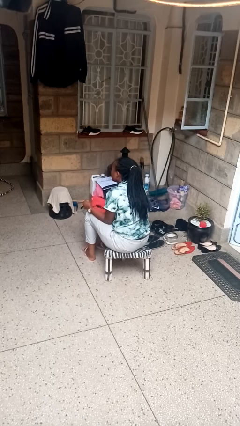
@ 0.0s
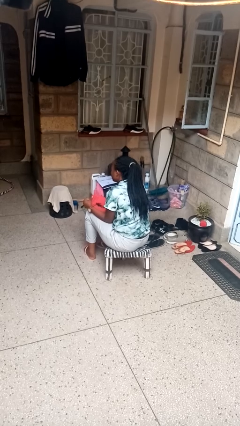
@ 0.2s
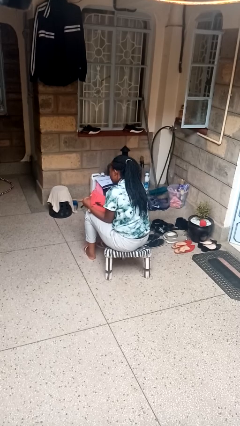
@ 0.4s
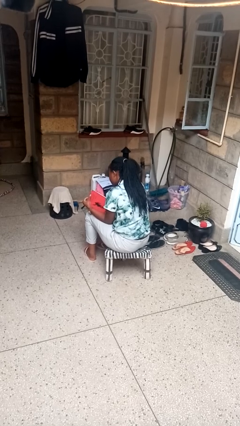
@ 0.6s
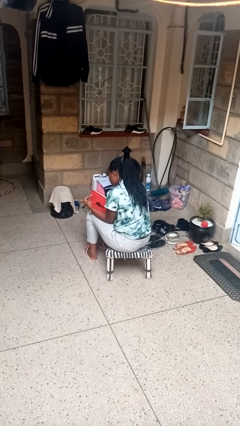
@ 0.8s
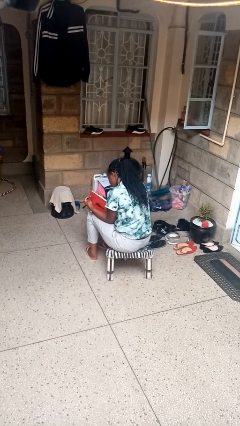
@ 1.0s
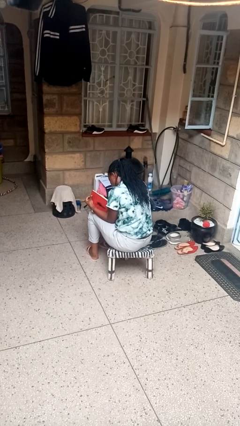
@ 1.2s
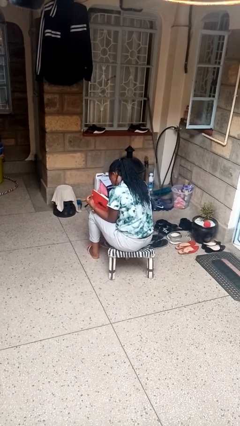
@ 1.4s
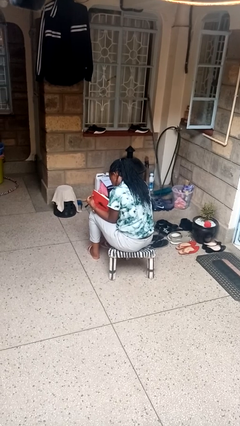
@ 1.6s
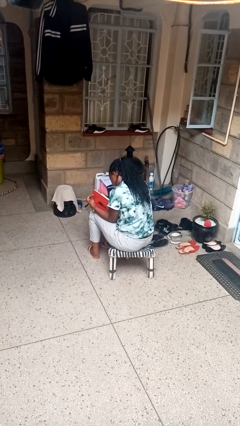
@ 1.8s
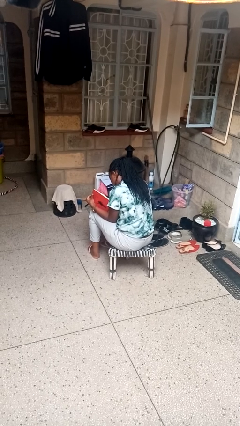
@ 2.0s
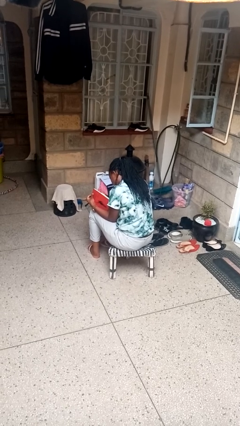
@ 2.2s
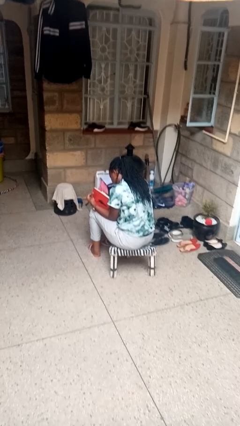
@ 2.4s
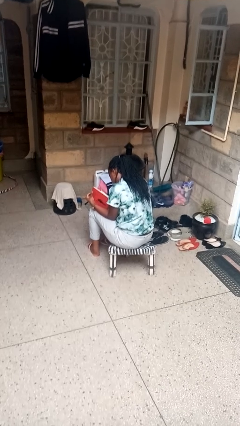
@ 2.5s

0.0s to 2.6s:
person reads book

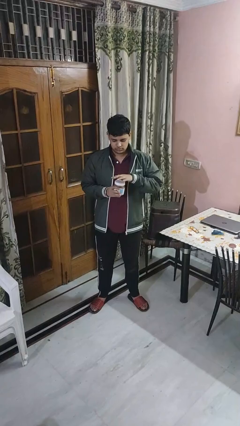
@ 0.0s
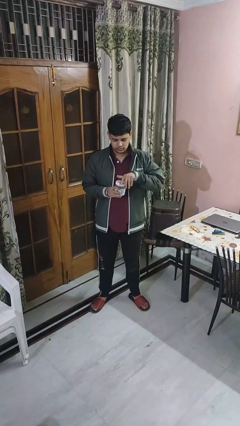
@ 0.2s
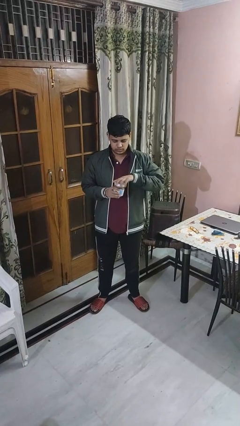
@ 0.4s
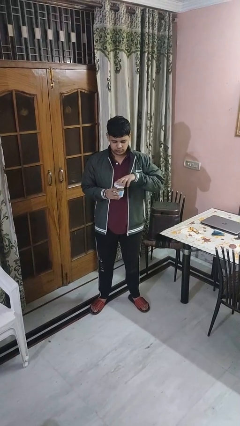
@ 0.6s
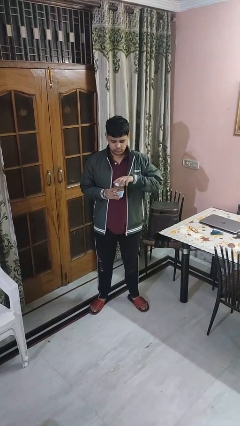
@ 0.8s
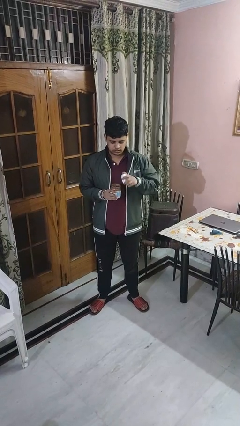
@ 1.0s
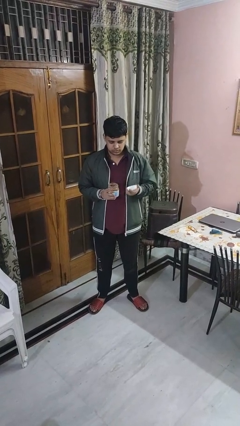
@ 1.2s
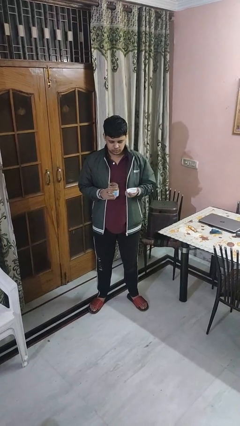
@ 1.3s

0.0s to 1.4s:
person opens jar

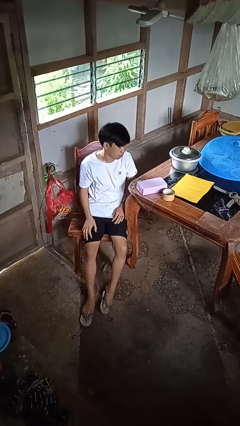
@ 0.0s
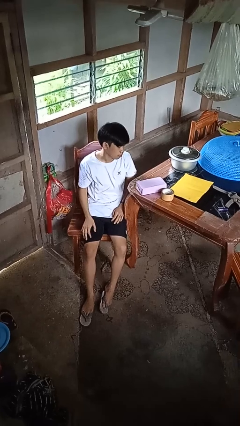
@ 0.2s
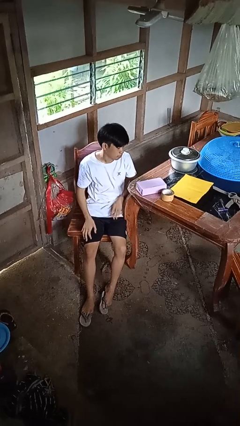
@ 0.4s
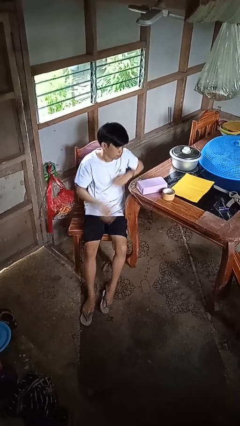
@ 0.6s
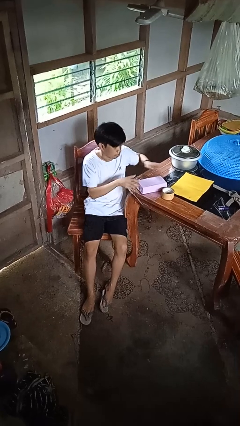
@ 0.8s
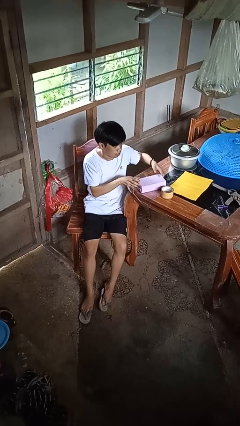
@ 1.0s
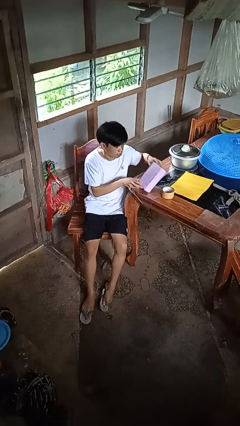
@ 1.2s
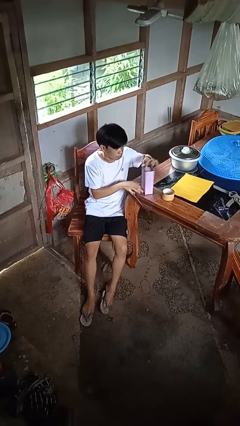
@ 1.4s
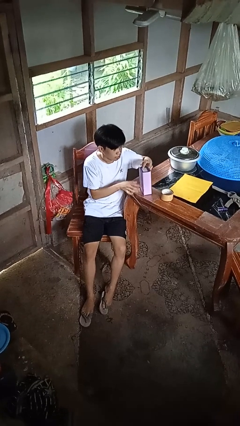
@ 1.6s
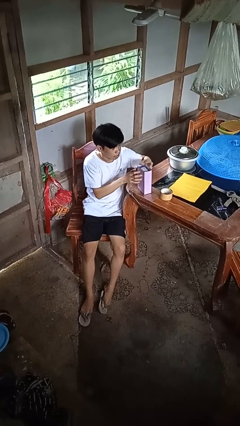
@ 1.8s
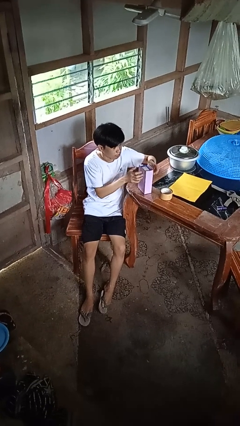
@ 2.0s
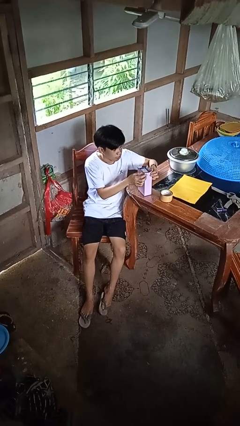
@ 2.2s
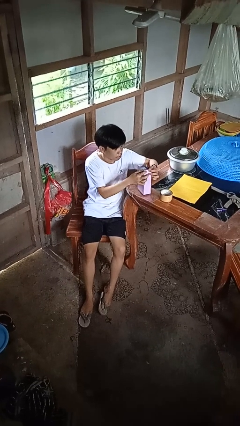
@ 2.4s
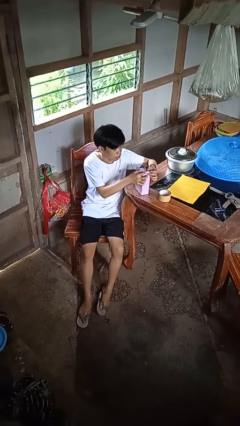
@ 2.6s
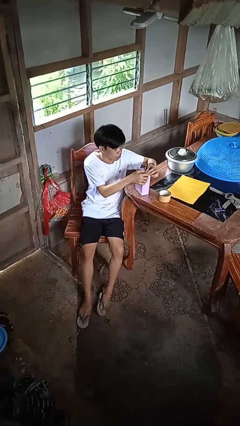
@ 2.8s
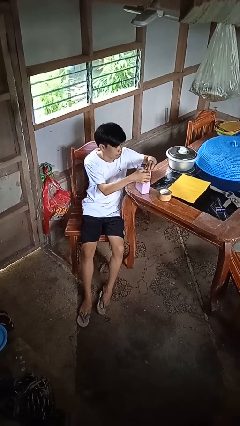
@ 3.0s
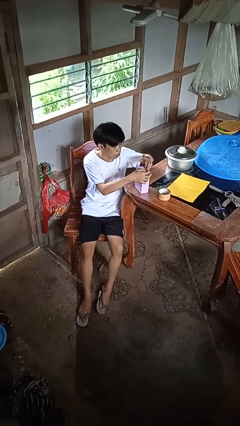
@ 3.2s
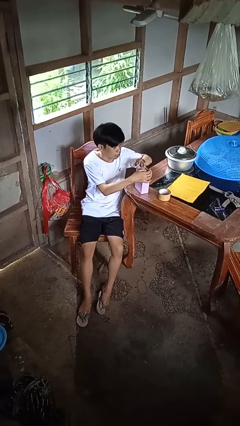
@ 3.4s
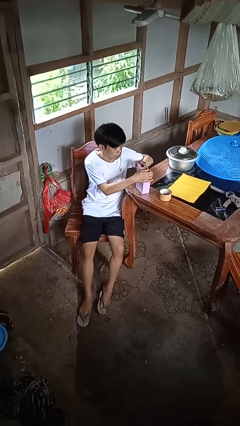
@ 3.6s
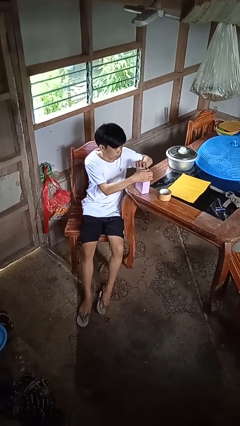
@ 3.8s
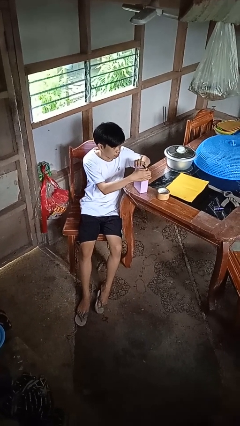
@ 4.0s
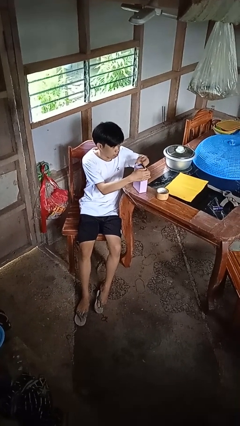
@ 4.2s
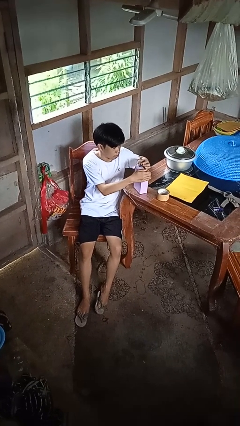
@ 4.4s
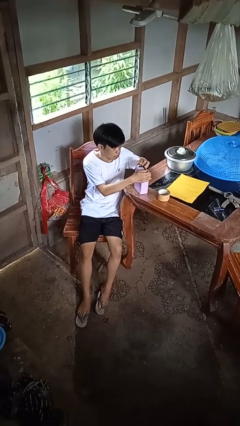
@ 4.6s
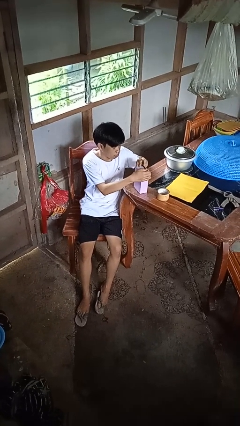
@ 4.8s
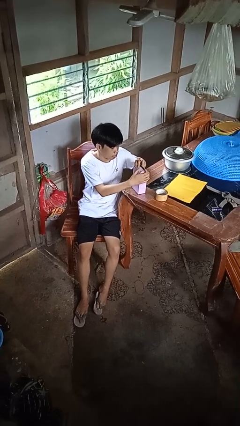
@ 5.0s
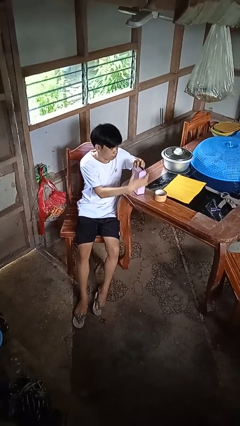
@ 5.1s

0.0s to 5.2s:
person wraps box

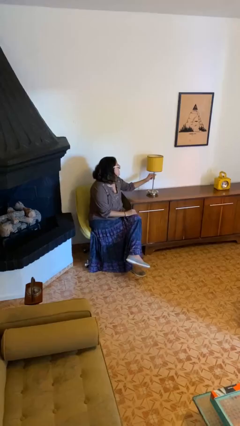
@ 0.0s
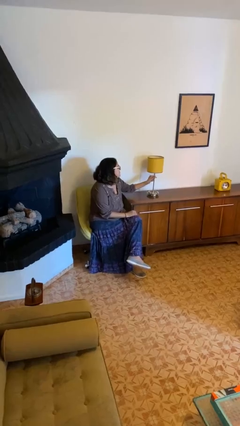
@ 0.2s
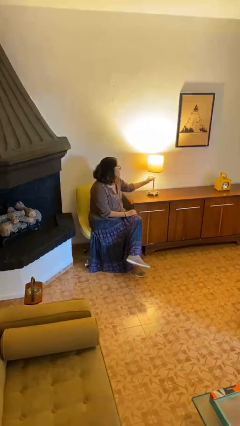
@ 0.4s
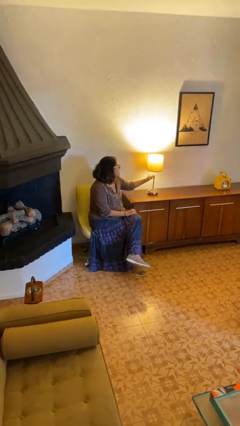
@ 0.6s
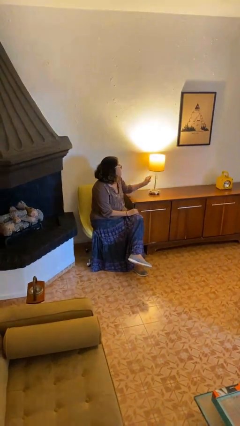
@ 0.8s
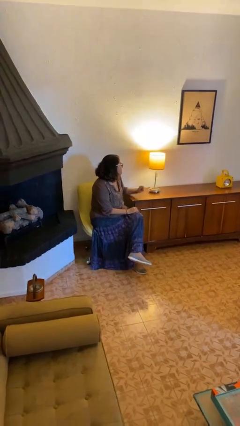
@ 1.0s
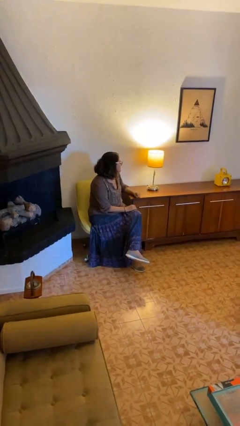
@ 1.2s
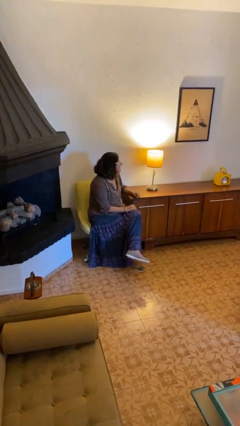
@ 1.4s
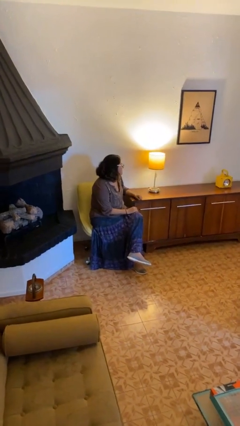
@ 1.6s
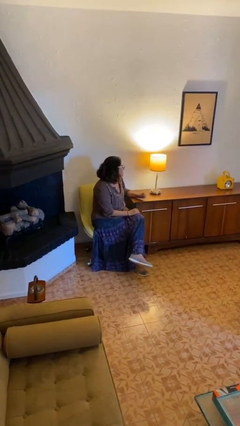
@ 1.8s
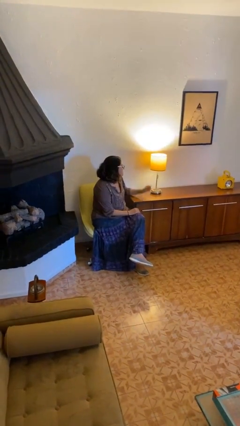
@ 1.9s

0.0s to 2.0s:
person turns on lamp

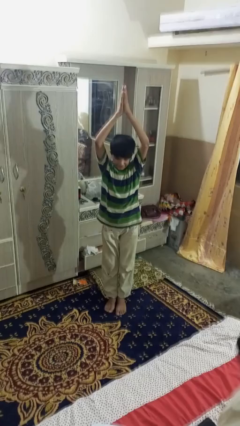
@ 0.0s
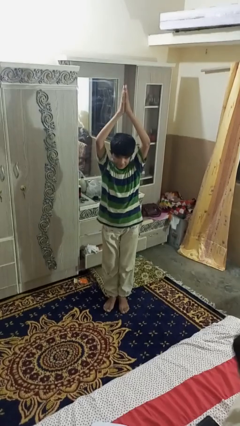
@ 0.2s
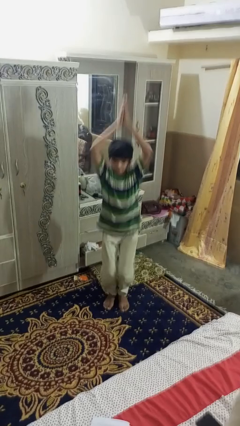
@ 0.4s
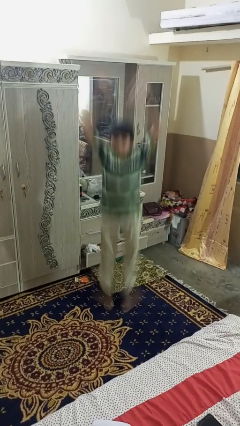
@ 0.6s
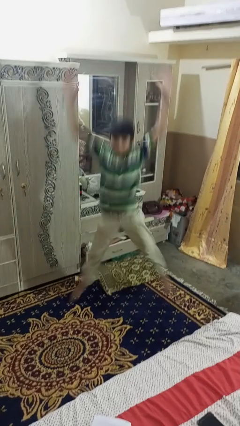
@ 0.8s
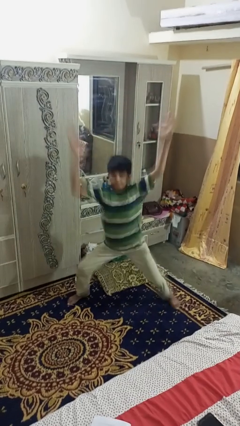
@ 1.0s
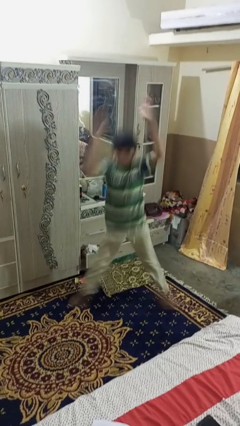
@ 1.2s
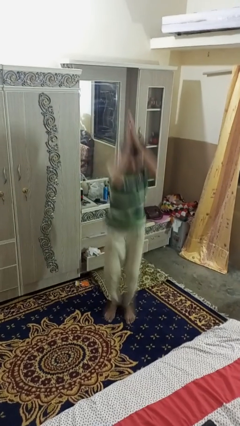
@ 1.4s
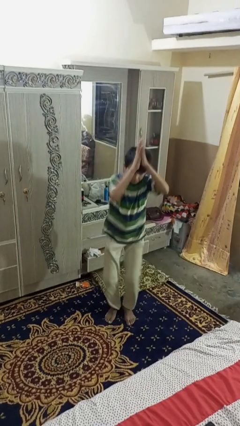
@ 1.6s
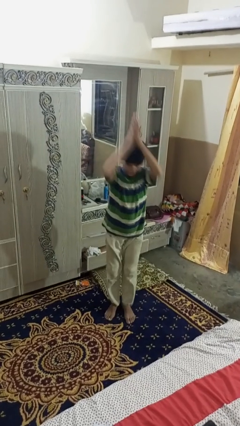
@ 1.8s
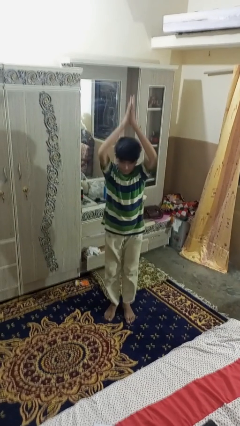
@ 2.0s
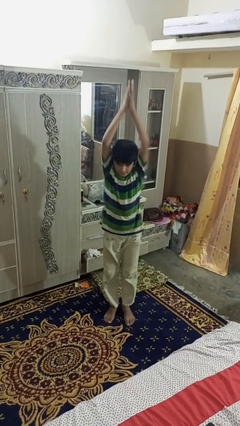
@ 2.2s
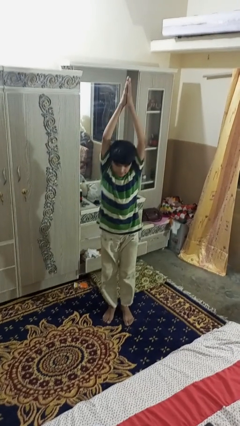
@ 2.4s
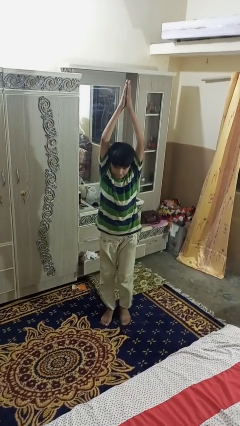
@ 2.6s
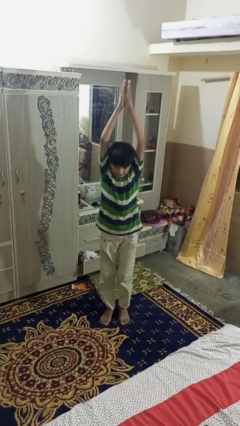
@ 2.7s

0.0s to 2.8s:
person exercises with jumping jacks

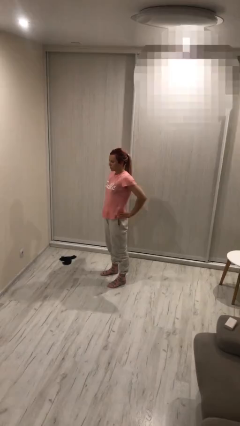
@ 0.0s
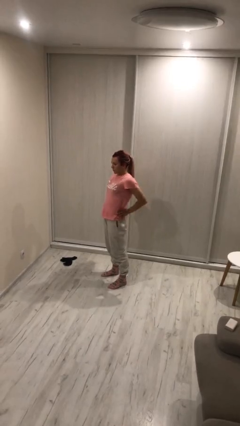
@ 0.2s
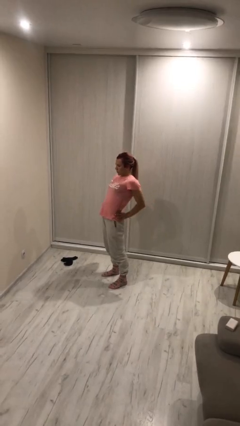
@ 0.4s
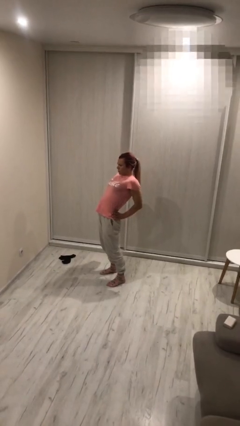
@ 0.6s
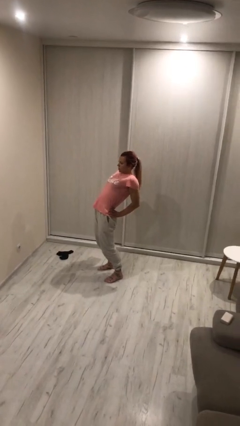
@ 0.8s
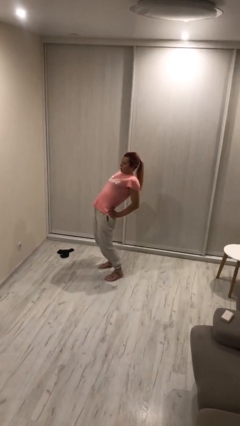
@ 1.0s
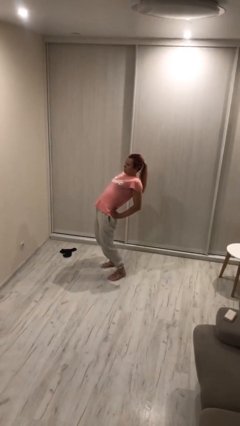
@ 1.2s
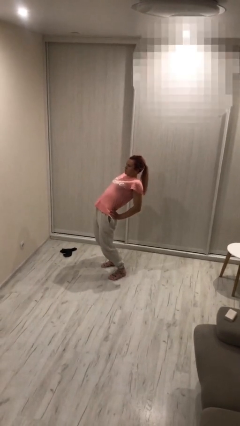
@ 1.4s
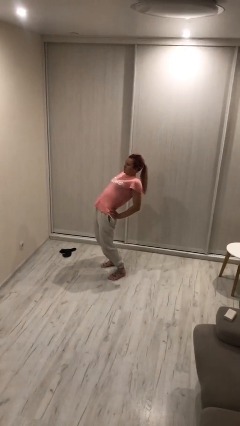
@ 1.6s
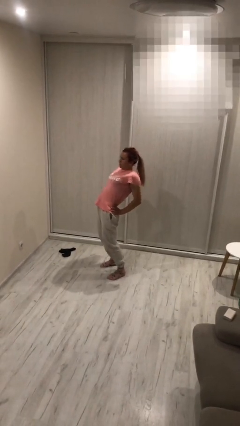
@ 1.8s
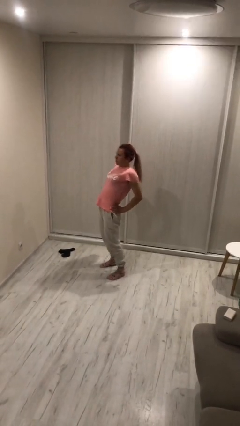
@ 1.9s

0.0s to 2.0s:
person stretches back

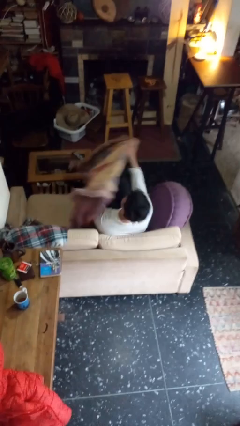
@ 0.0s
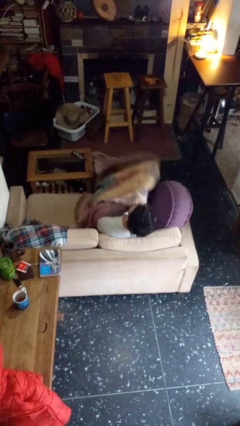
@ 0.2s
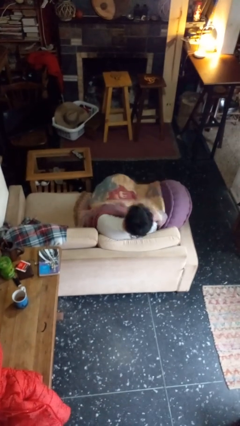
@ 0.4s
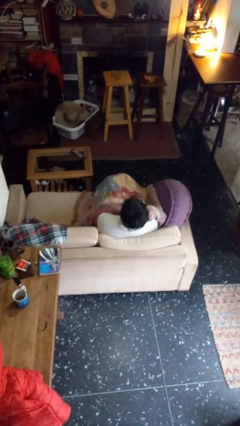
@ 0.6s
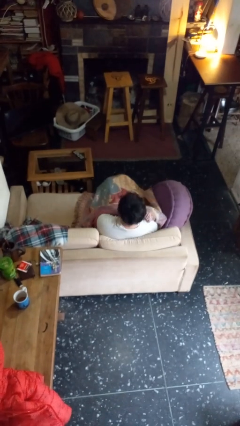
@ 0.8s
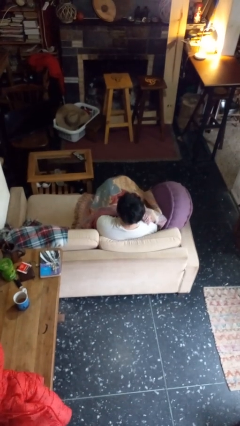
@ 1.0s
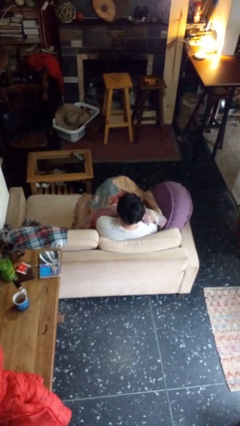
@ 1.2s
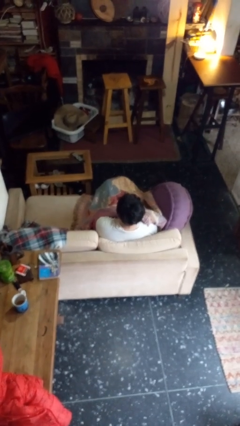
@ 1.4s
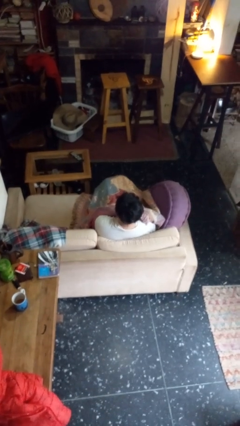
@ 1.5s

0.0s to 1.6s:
person covers with blanket
